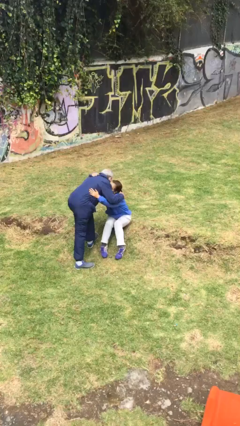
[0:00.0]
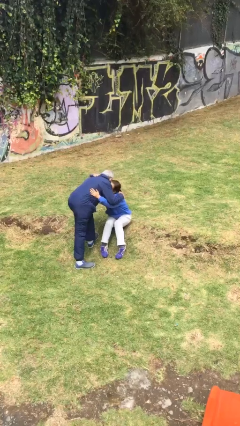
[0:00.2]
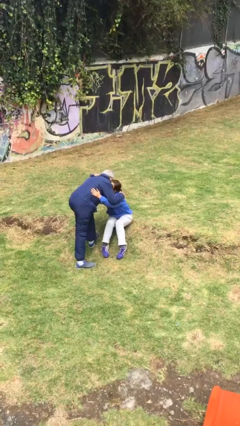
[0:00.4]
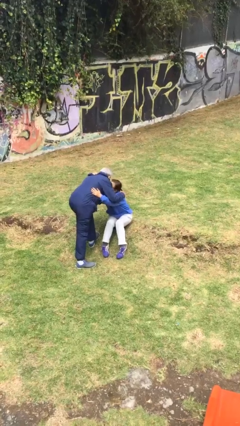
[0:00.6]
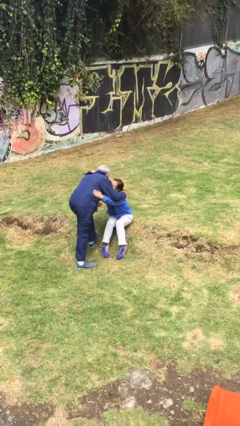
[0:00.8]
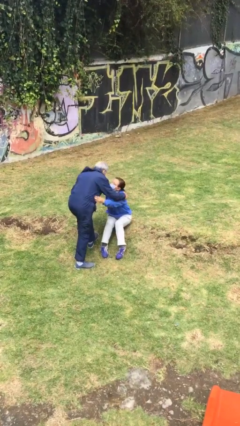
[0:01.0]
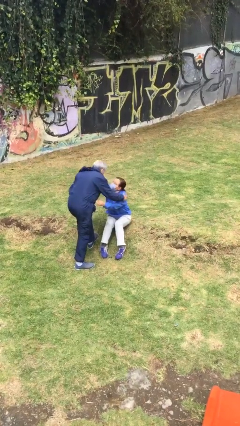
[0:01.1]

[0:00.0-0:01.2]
person embraces person

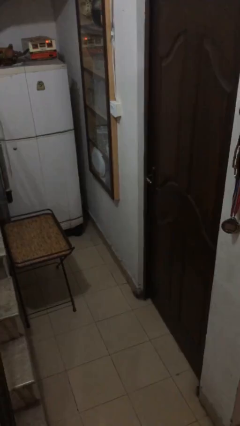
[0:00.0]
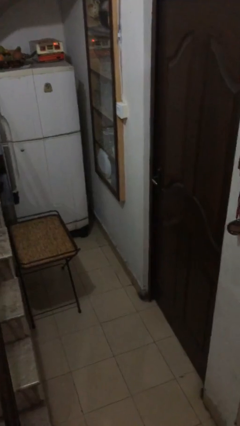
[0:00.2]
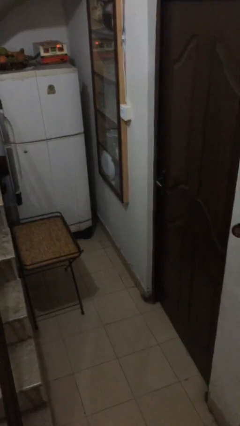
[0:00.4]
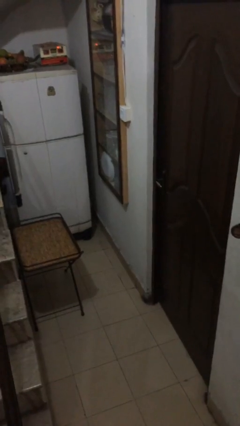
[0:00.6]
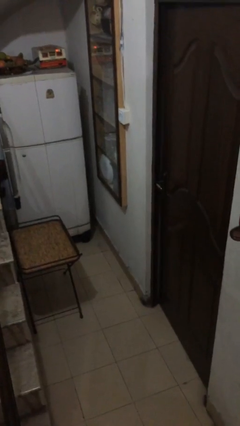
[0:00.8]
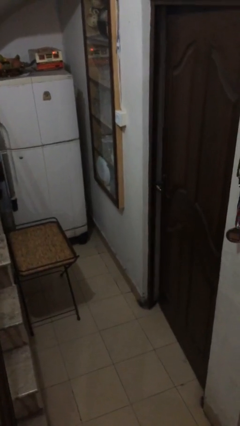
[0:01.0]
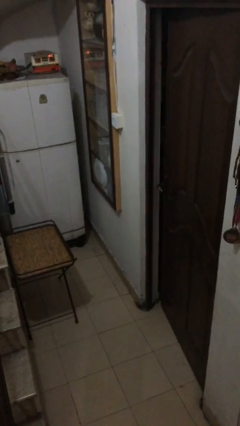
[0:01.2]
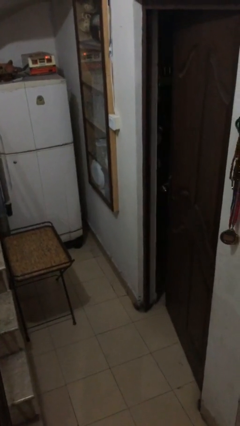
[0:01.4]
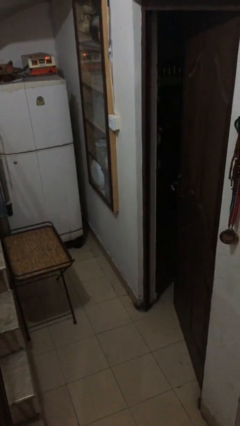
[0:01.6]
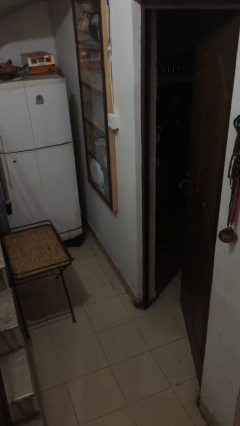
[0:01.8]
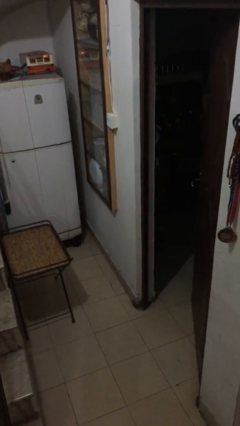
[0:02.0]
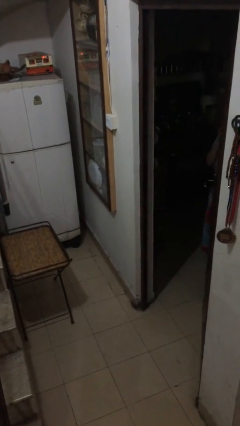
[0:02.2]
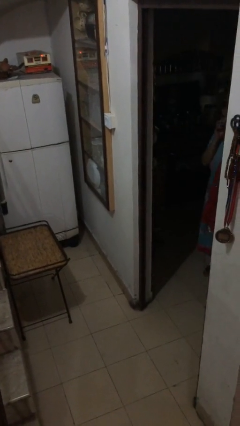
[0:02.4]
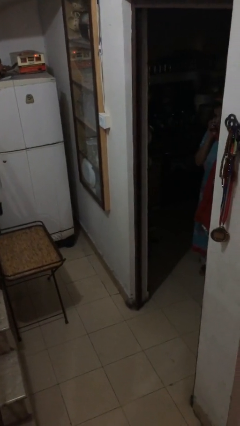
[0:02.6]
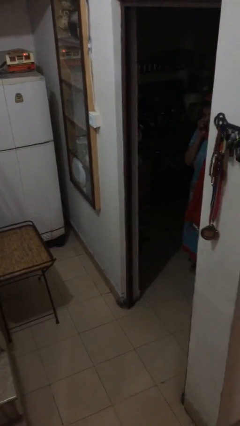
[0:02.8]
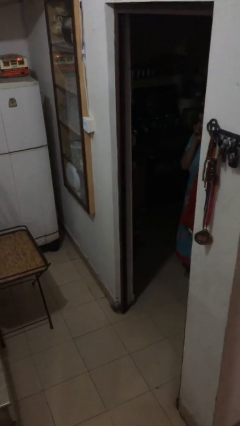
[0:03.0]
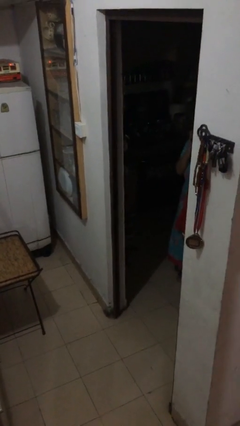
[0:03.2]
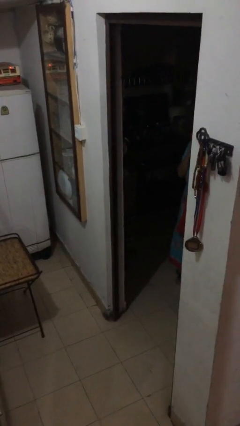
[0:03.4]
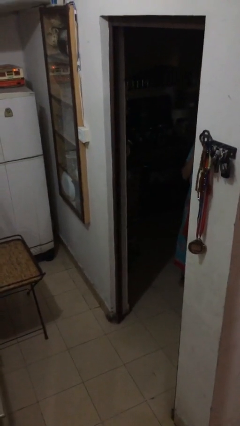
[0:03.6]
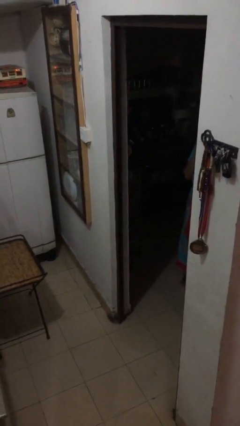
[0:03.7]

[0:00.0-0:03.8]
person opens facility door

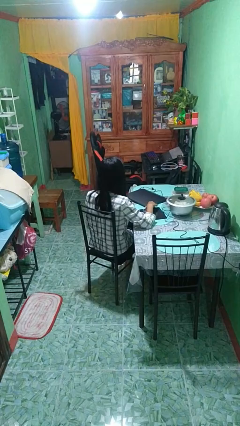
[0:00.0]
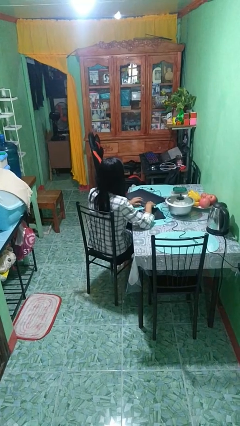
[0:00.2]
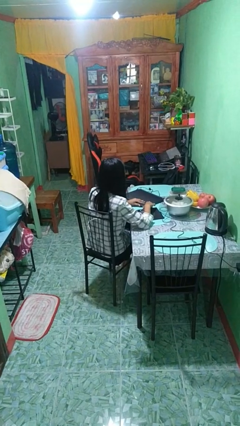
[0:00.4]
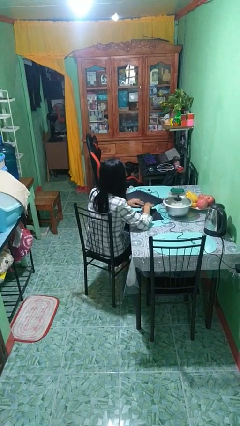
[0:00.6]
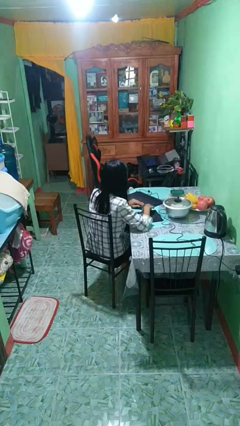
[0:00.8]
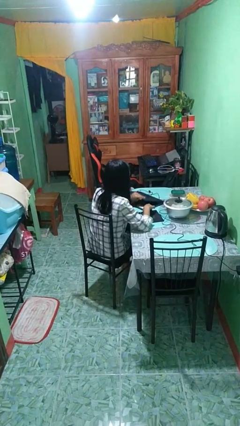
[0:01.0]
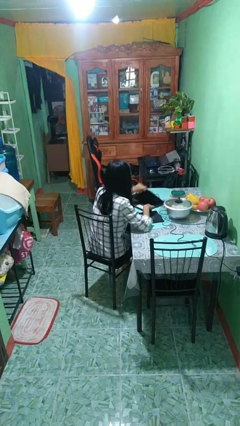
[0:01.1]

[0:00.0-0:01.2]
person opens laptop

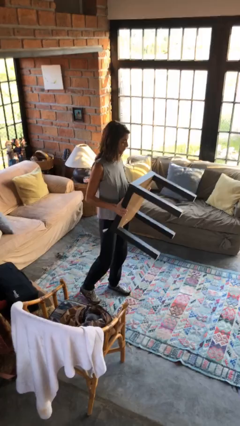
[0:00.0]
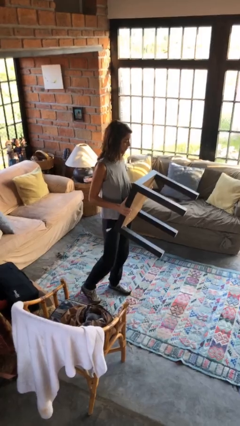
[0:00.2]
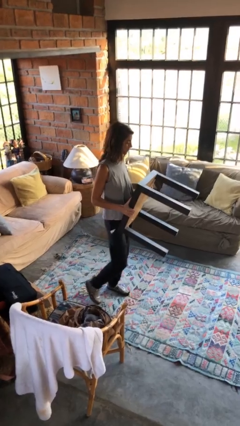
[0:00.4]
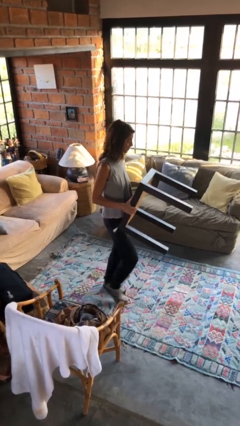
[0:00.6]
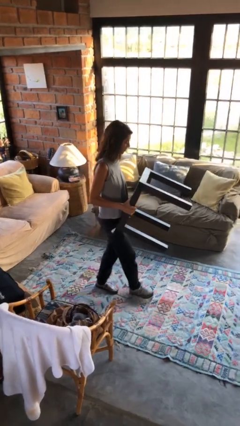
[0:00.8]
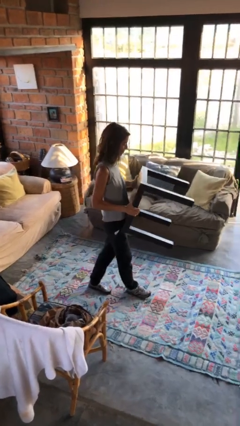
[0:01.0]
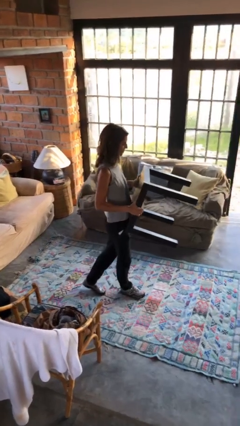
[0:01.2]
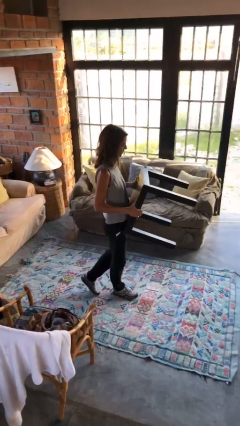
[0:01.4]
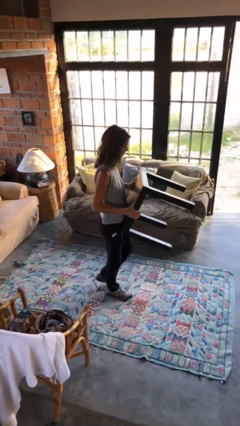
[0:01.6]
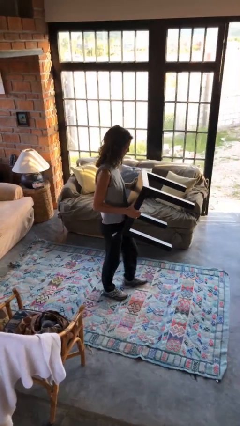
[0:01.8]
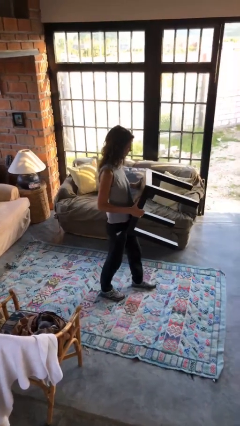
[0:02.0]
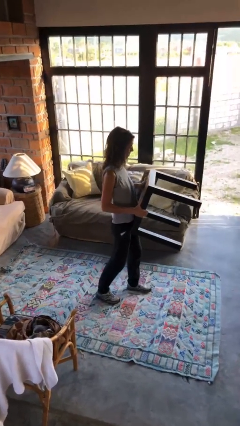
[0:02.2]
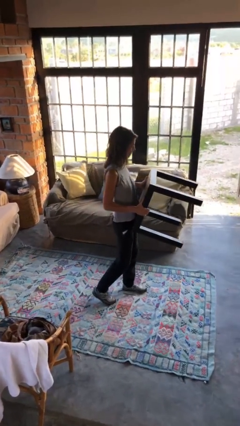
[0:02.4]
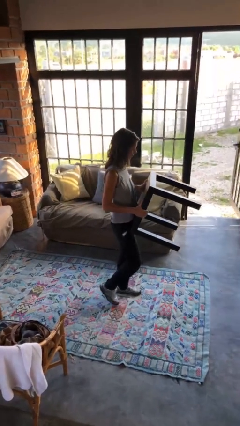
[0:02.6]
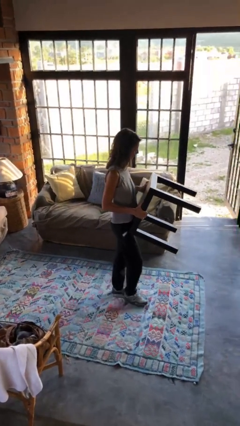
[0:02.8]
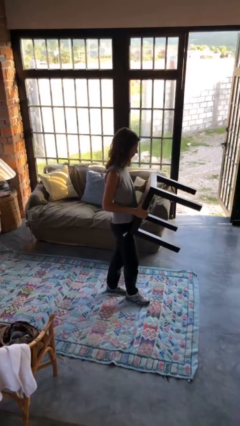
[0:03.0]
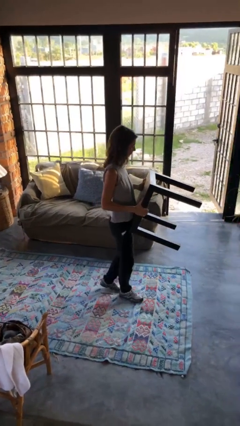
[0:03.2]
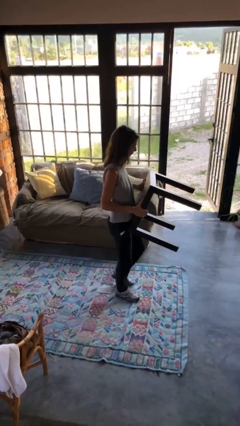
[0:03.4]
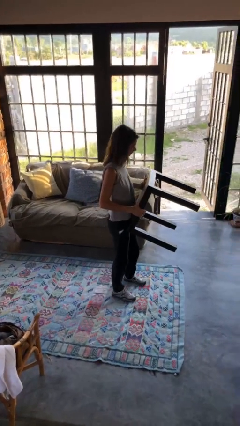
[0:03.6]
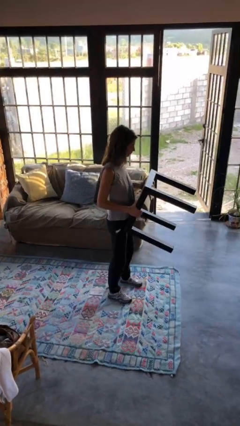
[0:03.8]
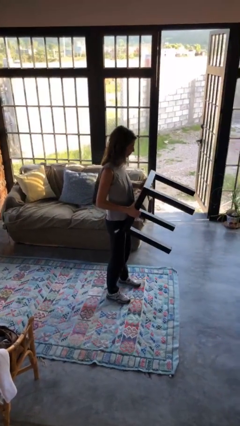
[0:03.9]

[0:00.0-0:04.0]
person carries furniture

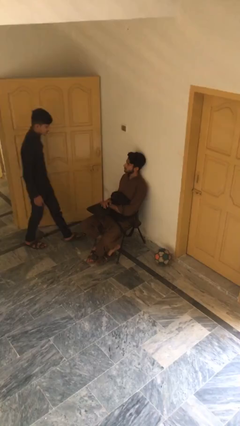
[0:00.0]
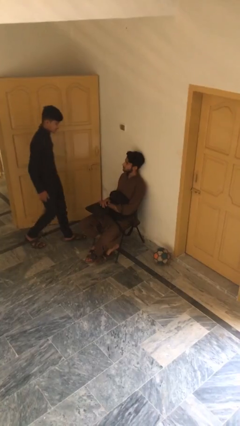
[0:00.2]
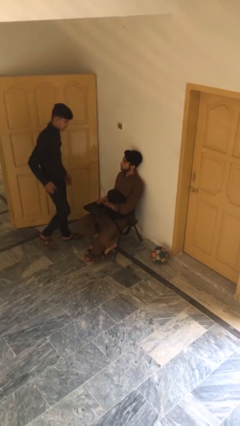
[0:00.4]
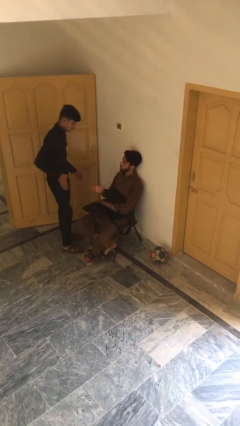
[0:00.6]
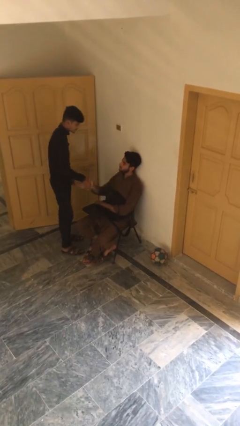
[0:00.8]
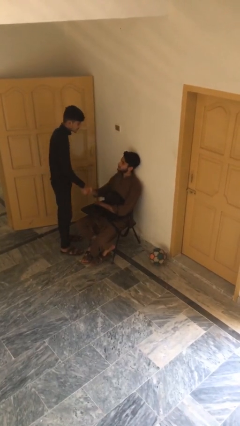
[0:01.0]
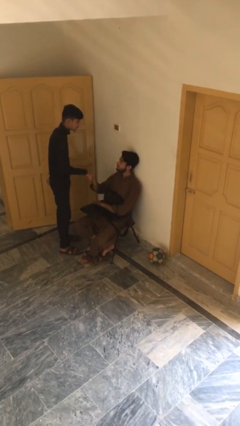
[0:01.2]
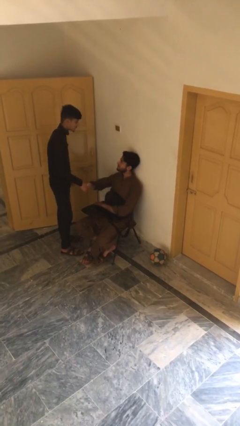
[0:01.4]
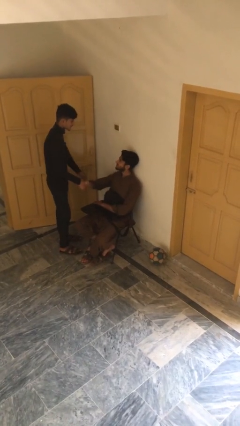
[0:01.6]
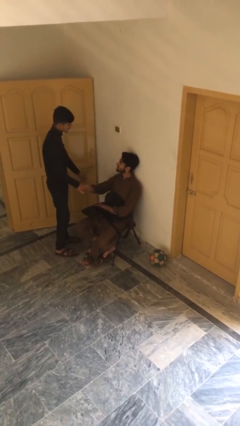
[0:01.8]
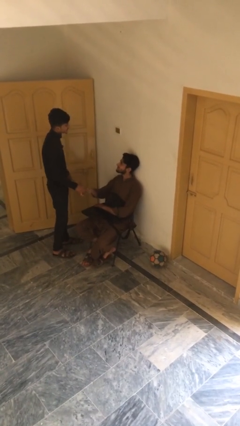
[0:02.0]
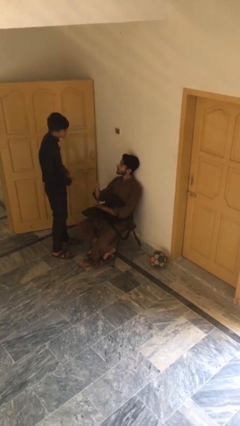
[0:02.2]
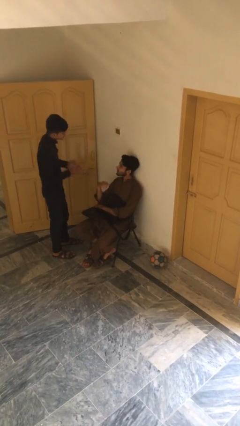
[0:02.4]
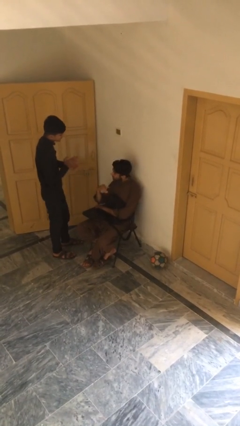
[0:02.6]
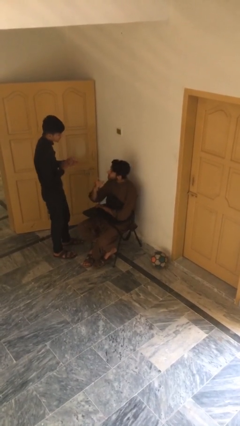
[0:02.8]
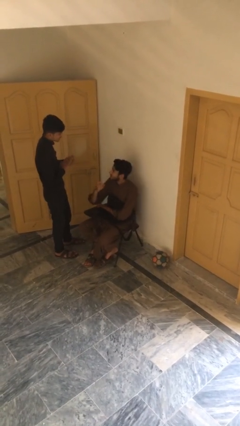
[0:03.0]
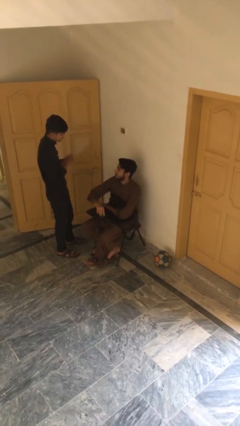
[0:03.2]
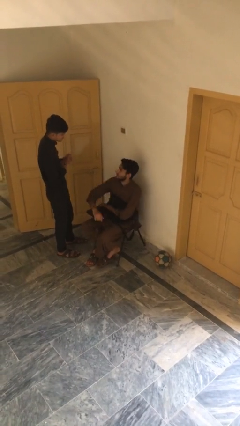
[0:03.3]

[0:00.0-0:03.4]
person shakes hand

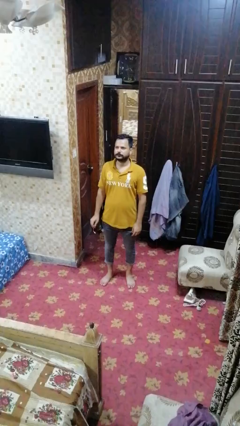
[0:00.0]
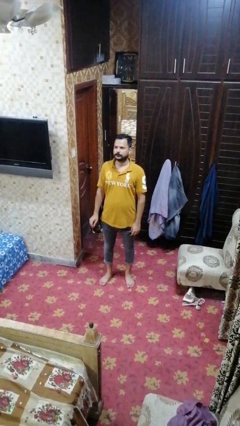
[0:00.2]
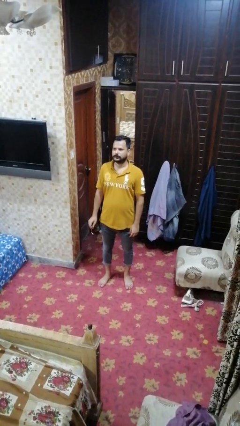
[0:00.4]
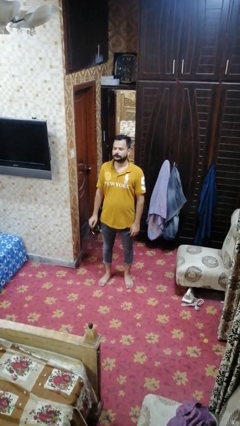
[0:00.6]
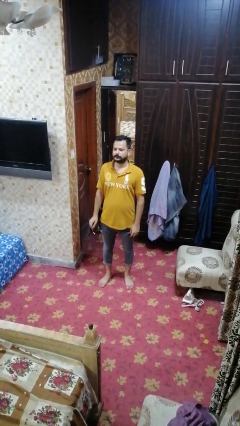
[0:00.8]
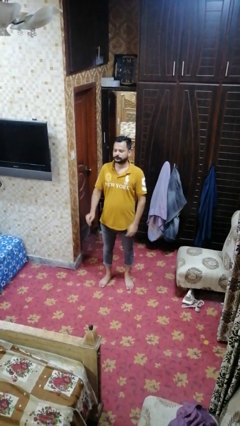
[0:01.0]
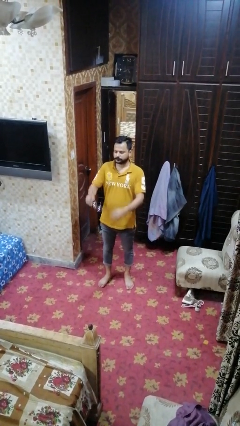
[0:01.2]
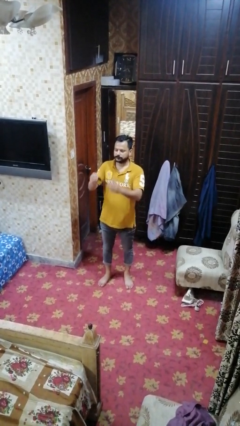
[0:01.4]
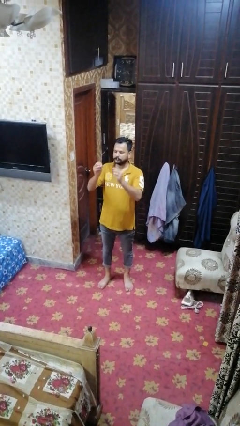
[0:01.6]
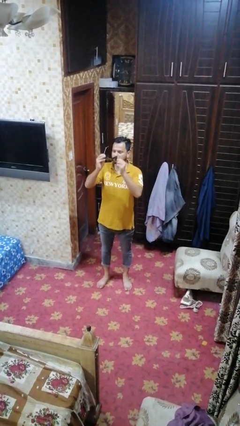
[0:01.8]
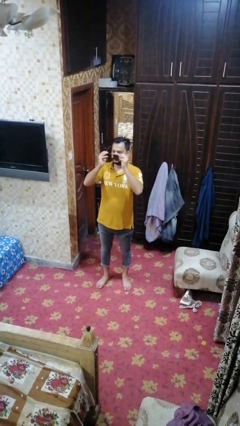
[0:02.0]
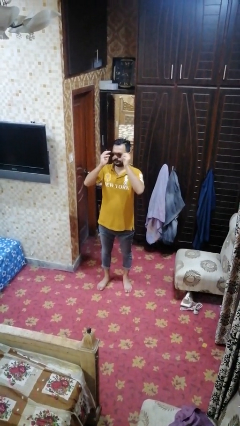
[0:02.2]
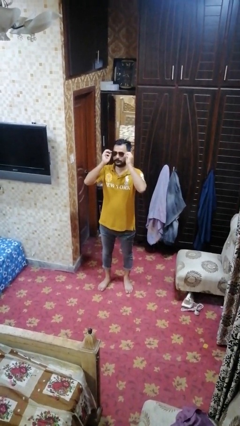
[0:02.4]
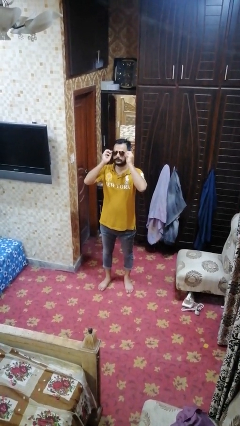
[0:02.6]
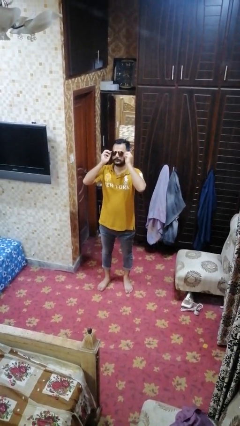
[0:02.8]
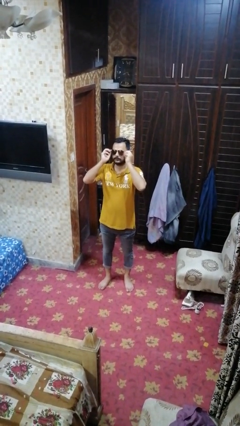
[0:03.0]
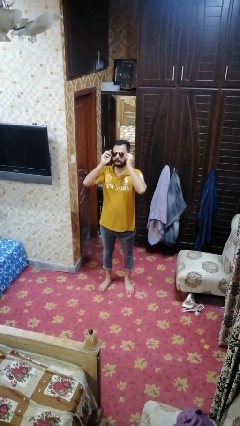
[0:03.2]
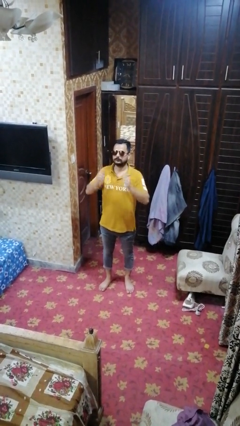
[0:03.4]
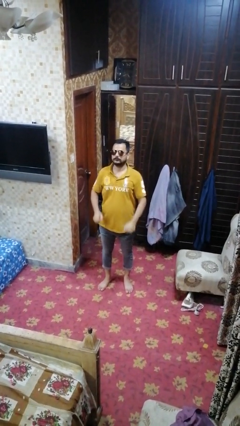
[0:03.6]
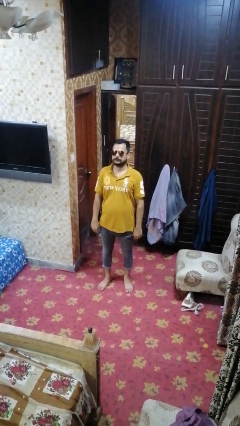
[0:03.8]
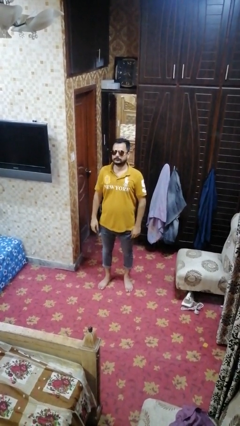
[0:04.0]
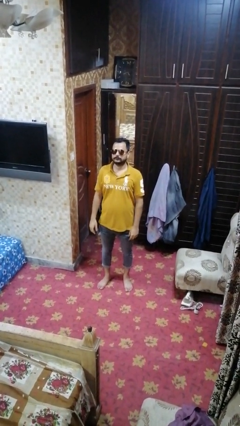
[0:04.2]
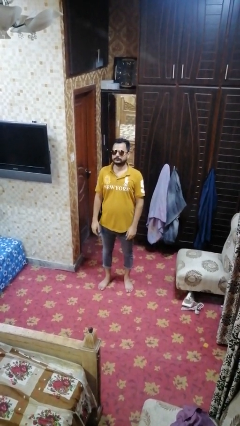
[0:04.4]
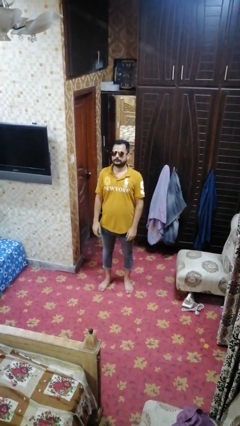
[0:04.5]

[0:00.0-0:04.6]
person puts on sunglasses
